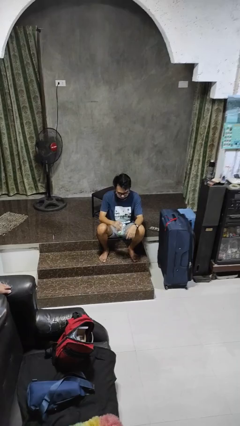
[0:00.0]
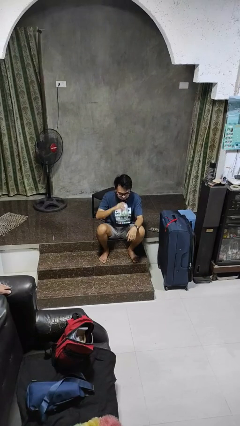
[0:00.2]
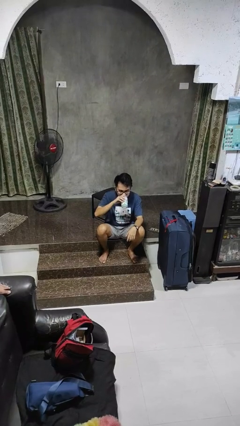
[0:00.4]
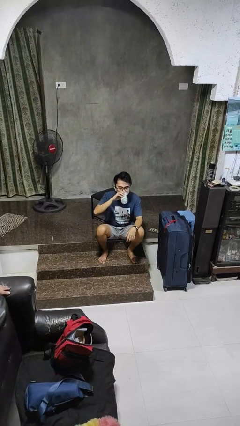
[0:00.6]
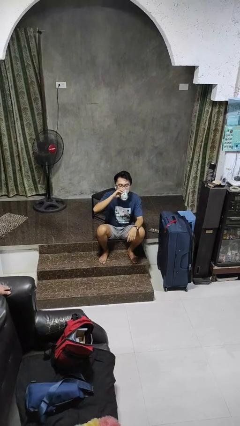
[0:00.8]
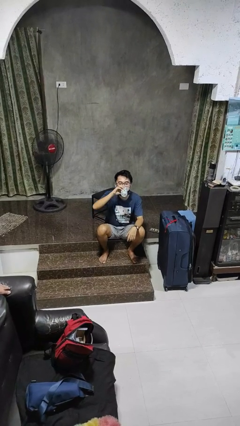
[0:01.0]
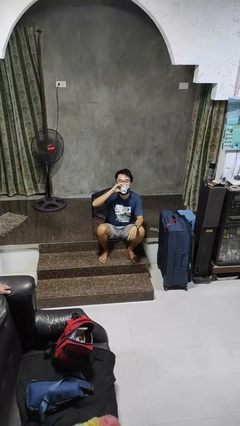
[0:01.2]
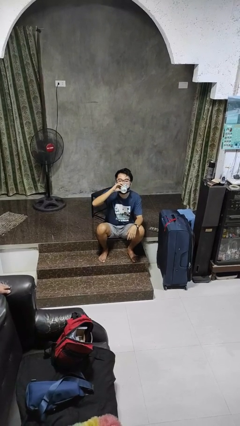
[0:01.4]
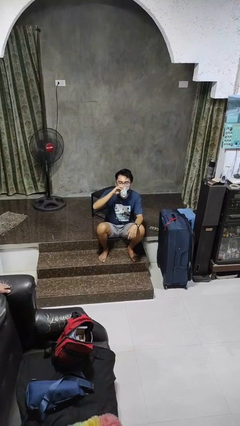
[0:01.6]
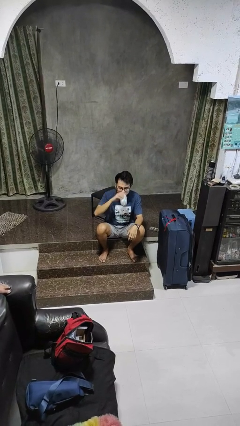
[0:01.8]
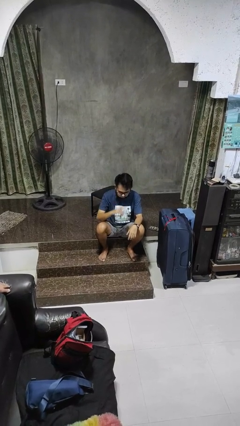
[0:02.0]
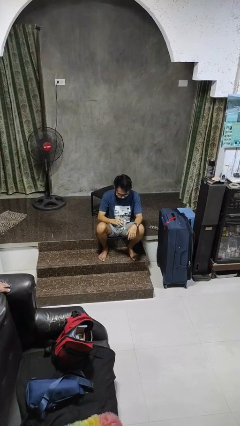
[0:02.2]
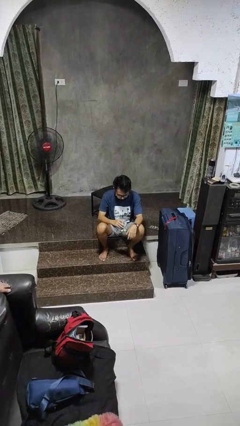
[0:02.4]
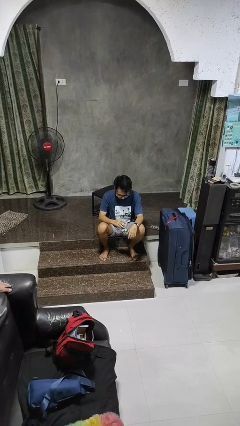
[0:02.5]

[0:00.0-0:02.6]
person drinks from beverage can

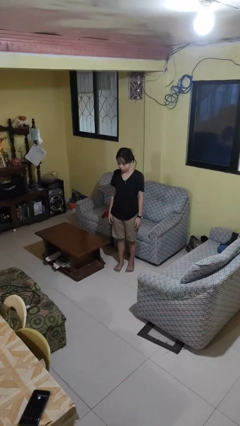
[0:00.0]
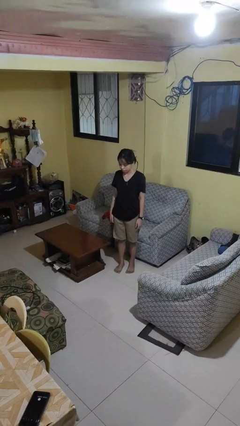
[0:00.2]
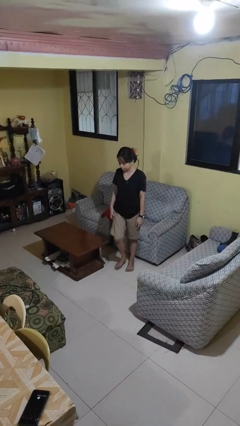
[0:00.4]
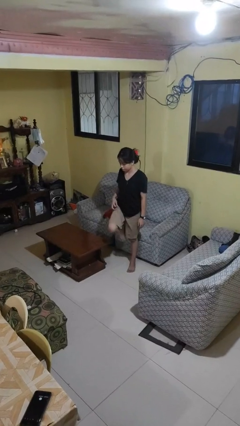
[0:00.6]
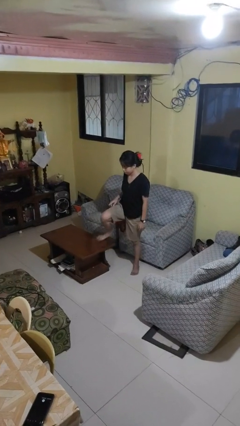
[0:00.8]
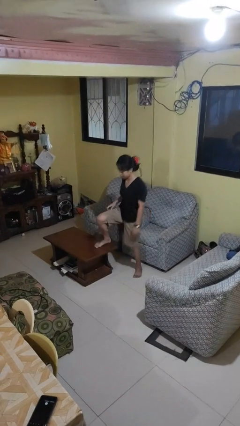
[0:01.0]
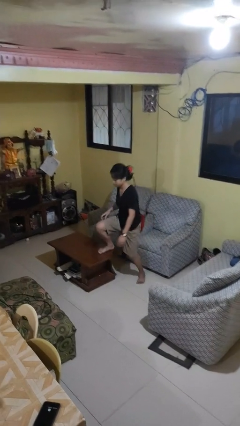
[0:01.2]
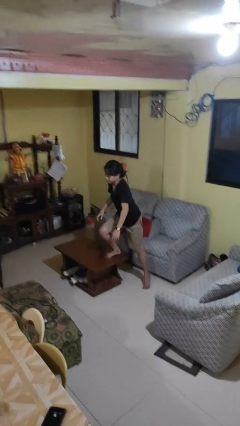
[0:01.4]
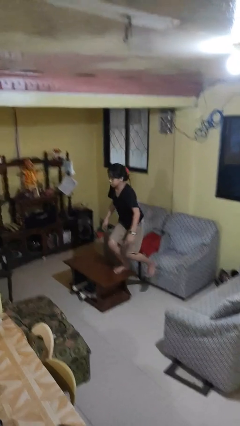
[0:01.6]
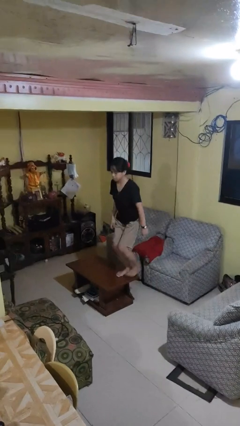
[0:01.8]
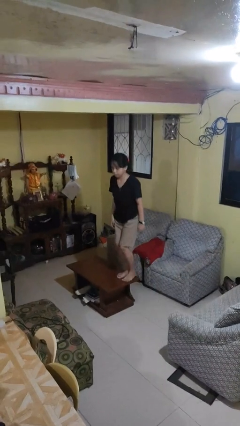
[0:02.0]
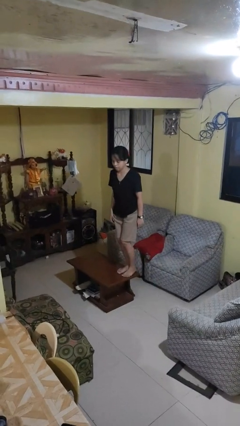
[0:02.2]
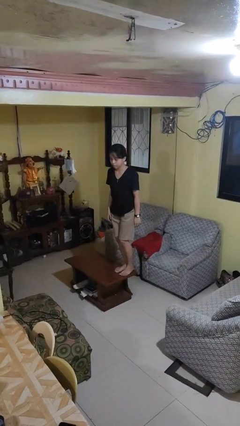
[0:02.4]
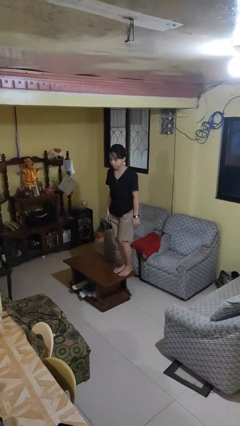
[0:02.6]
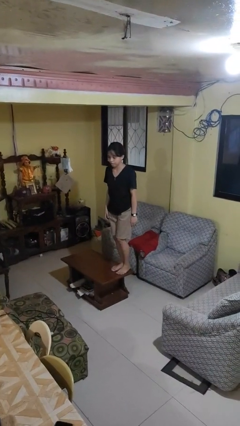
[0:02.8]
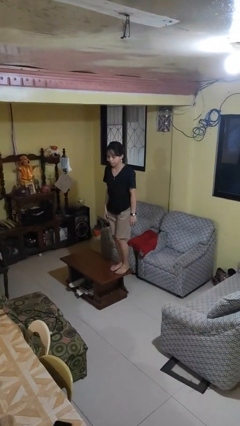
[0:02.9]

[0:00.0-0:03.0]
person climbs on table

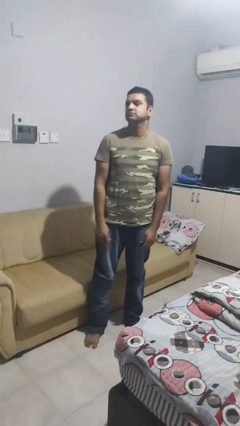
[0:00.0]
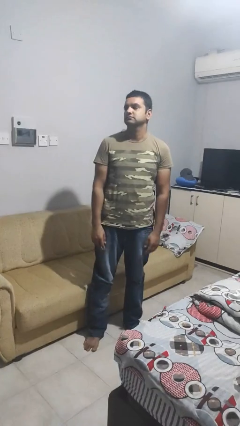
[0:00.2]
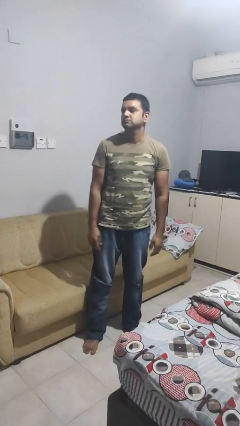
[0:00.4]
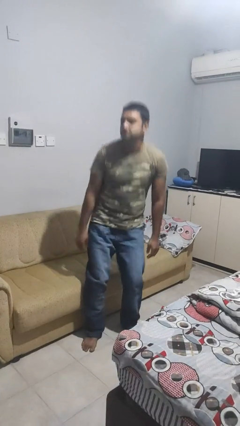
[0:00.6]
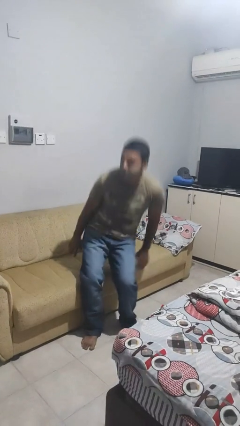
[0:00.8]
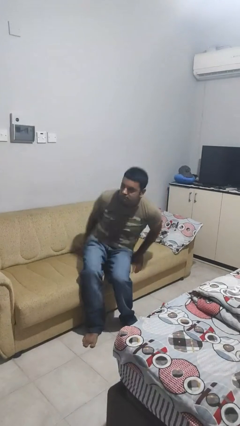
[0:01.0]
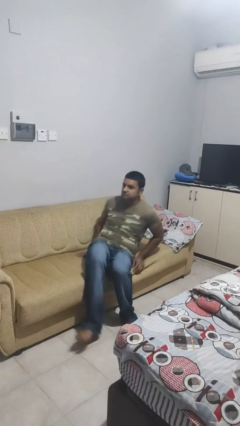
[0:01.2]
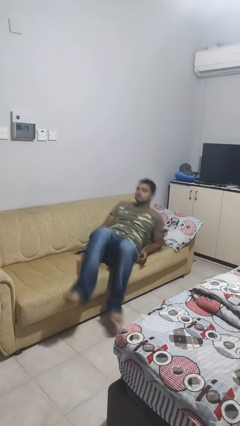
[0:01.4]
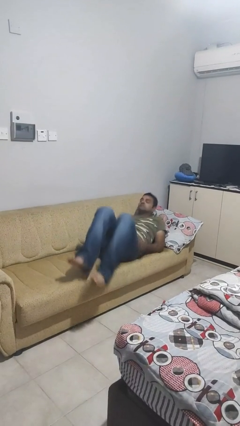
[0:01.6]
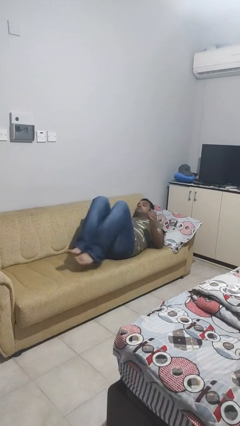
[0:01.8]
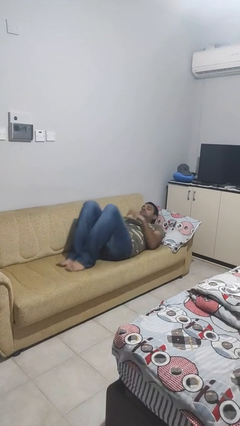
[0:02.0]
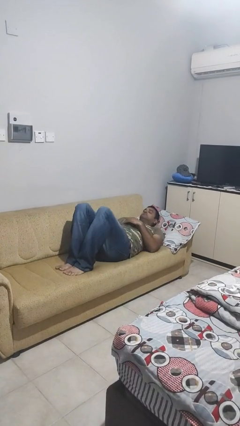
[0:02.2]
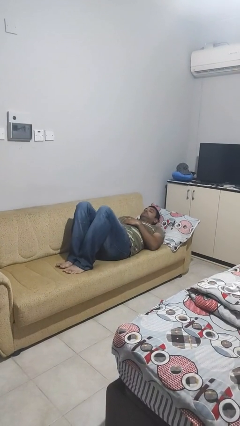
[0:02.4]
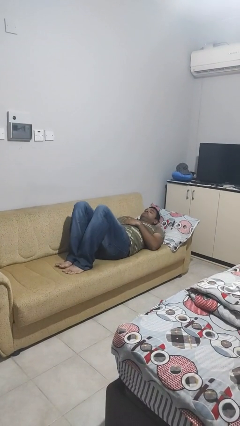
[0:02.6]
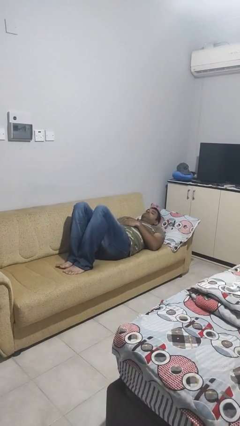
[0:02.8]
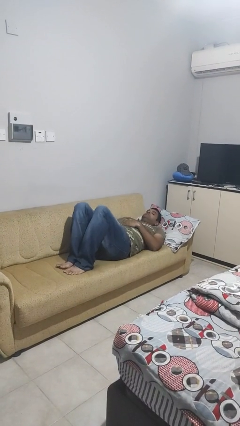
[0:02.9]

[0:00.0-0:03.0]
person lies down on couch

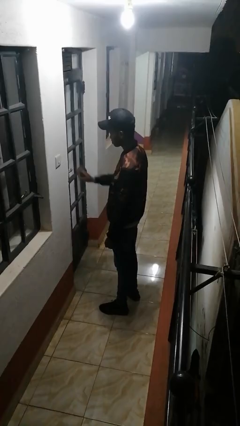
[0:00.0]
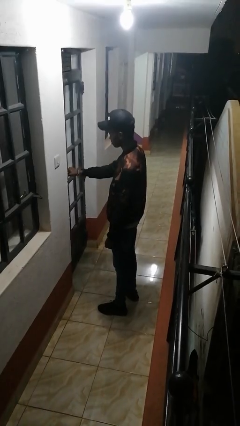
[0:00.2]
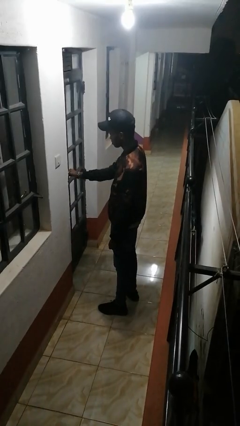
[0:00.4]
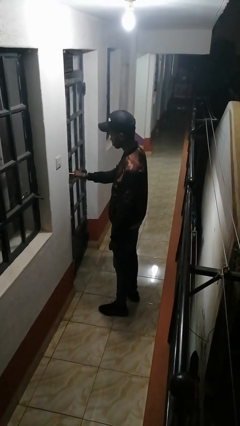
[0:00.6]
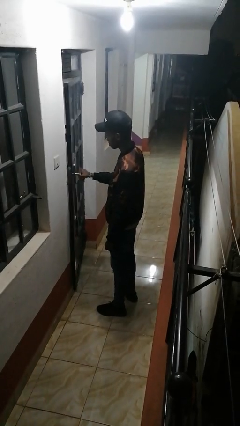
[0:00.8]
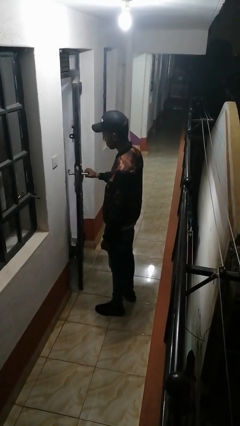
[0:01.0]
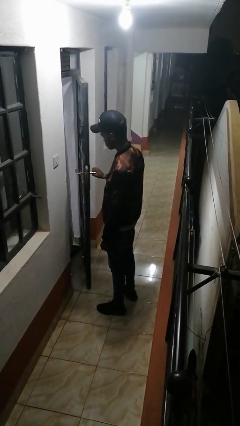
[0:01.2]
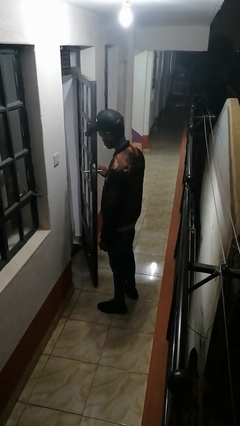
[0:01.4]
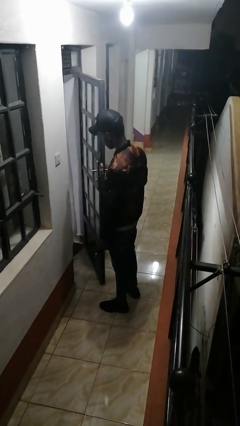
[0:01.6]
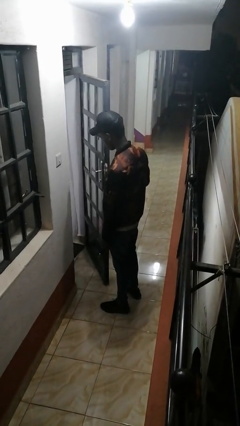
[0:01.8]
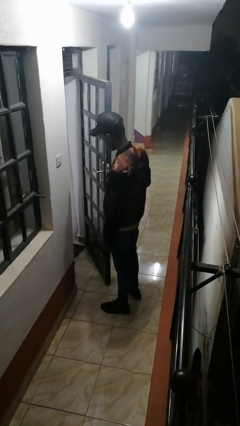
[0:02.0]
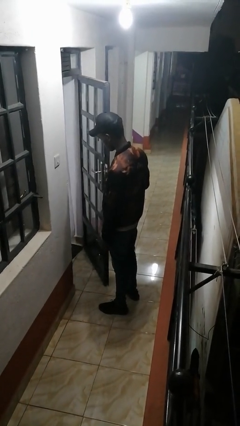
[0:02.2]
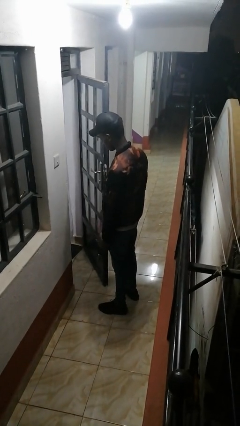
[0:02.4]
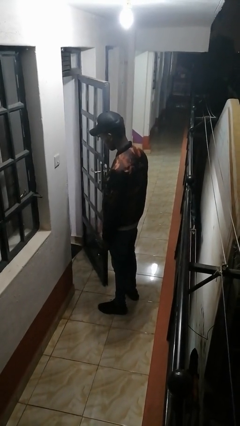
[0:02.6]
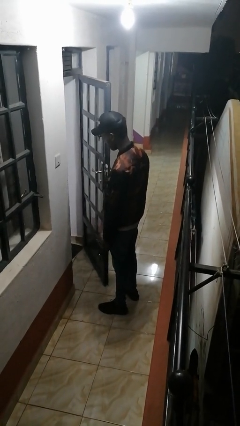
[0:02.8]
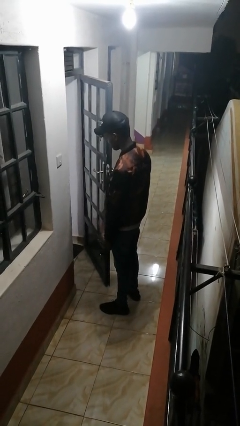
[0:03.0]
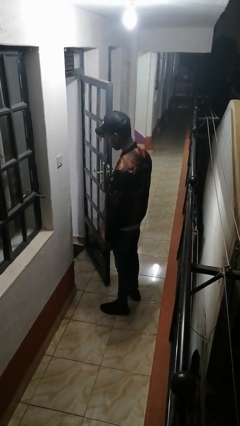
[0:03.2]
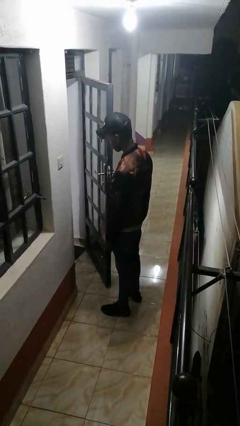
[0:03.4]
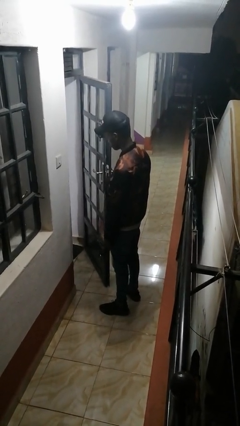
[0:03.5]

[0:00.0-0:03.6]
person opens facility door

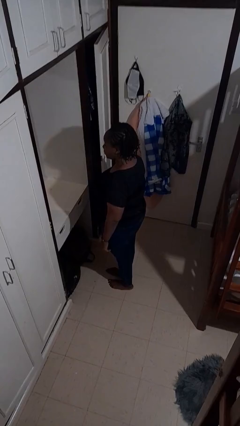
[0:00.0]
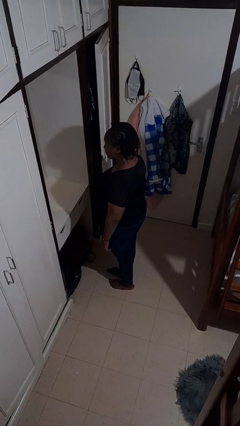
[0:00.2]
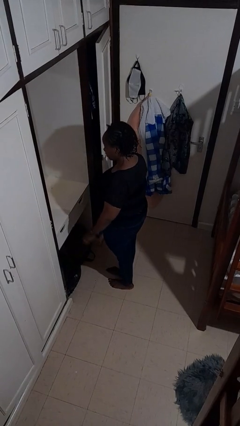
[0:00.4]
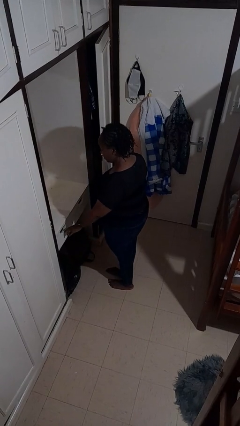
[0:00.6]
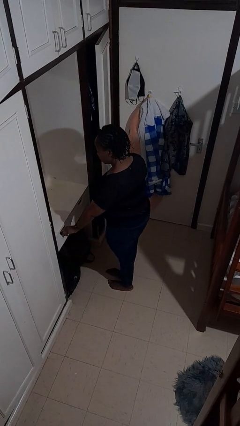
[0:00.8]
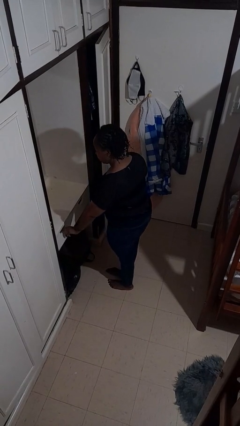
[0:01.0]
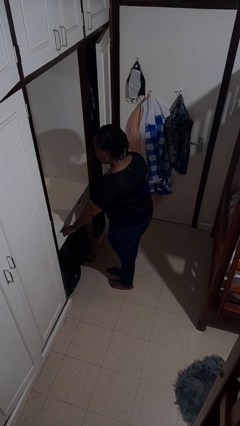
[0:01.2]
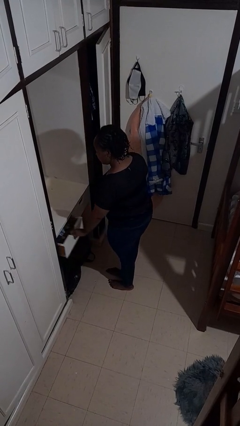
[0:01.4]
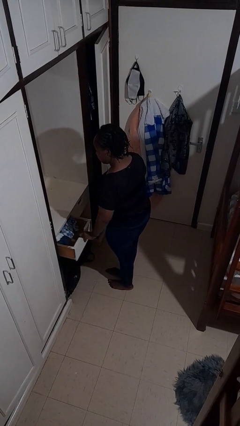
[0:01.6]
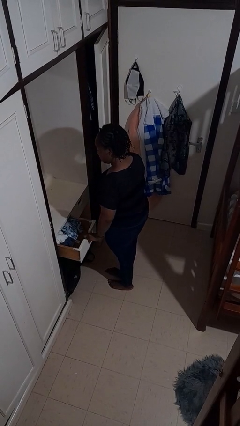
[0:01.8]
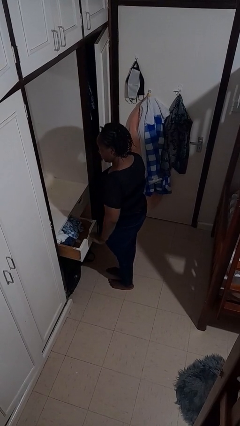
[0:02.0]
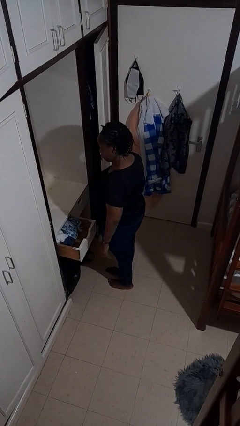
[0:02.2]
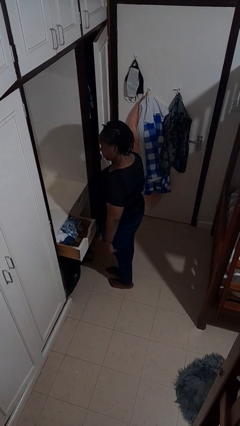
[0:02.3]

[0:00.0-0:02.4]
person opens dresser drawer

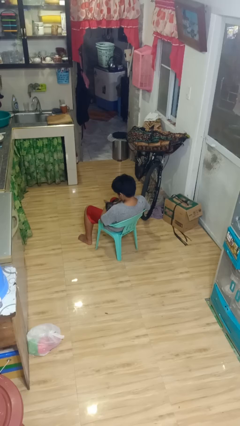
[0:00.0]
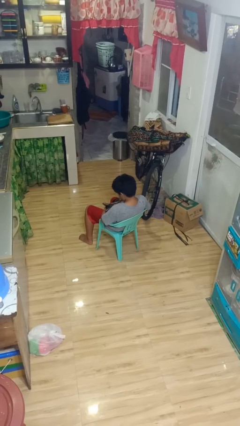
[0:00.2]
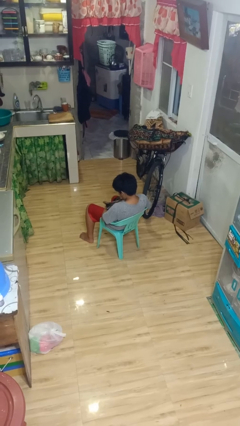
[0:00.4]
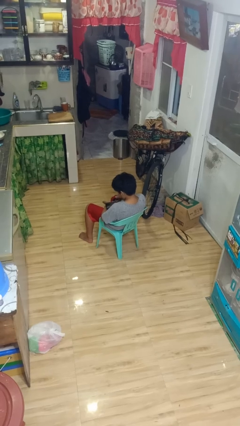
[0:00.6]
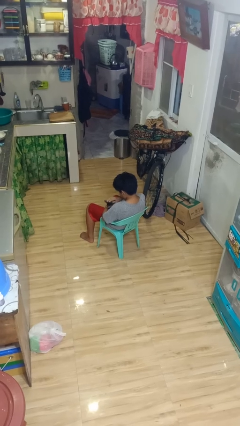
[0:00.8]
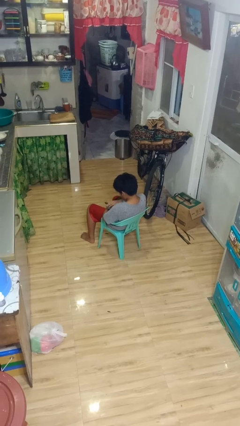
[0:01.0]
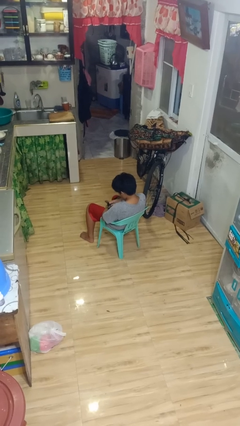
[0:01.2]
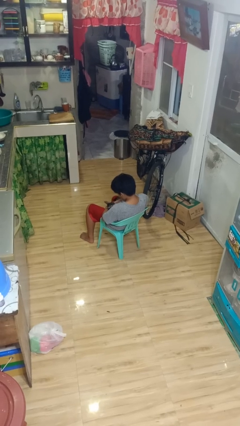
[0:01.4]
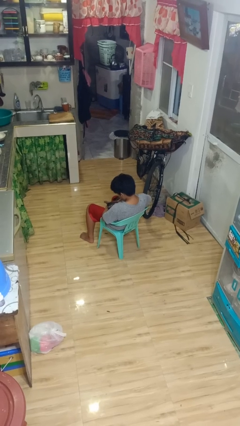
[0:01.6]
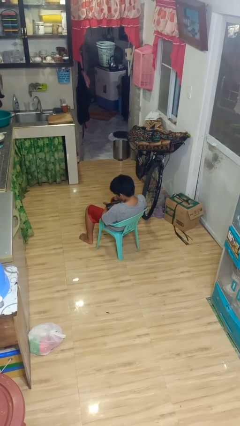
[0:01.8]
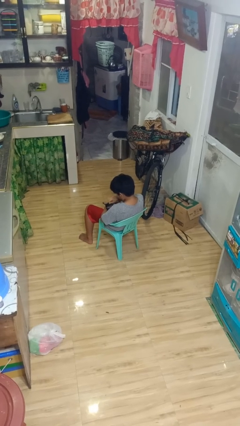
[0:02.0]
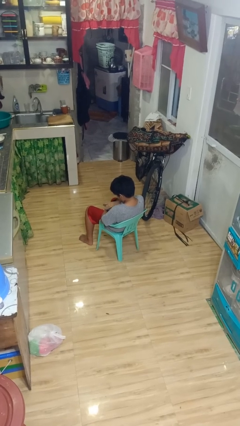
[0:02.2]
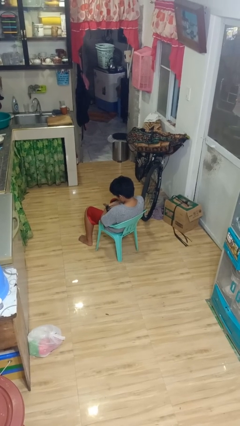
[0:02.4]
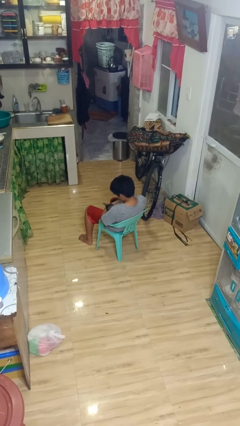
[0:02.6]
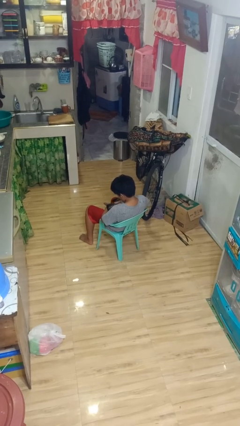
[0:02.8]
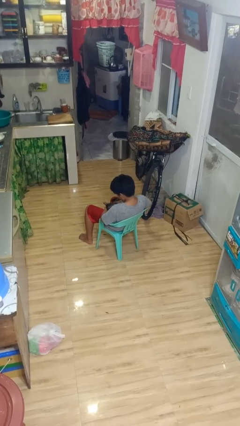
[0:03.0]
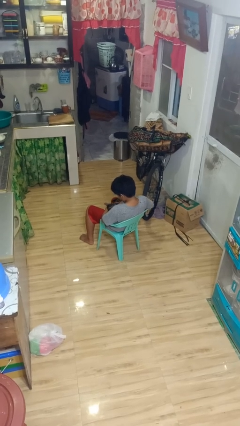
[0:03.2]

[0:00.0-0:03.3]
person pets cat
